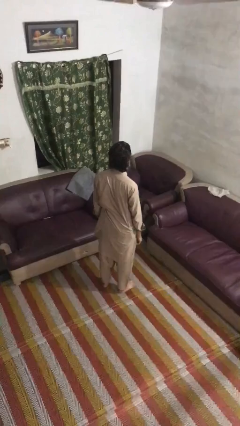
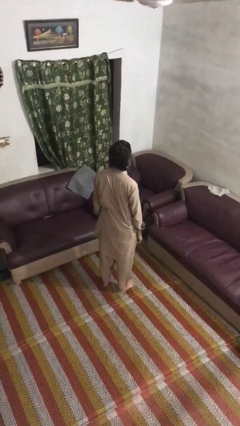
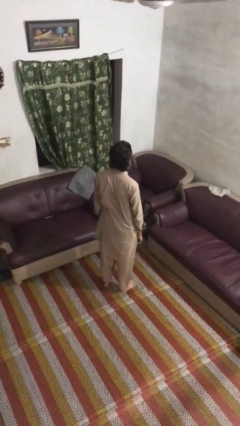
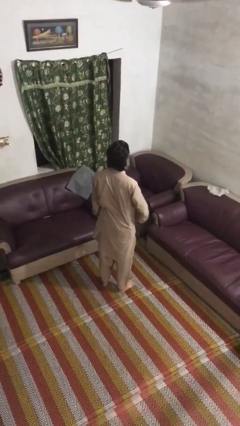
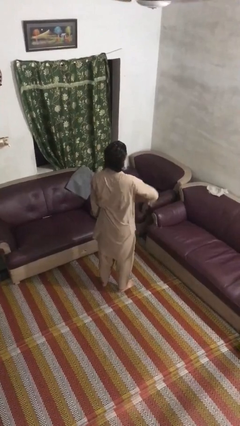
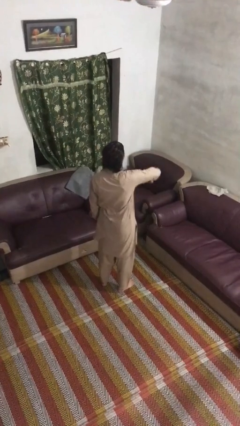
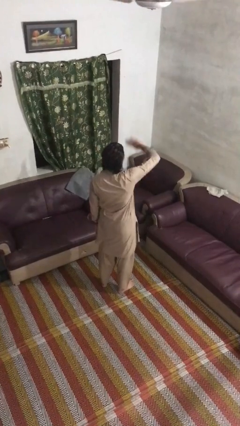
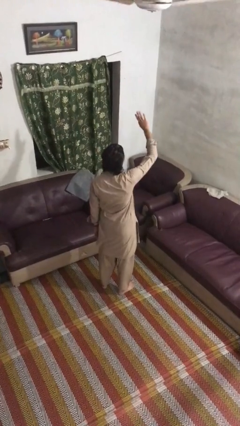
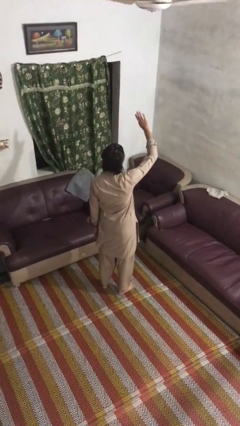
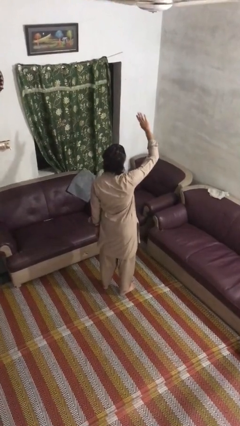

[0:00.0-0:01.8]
person gestures swipe up

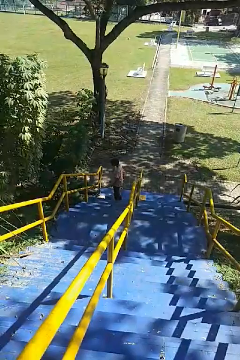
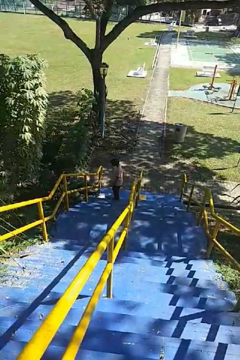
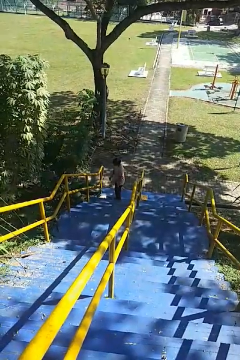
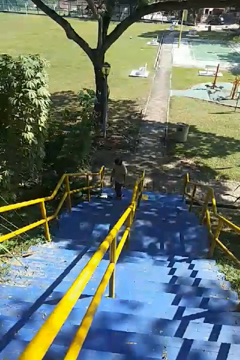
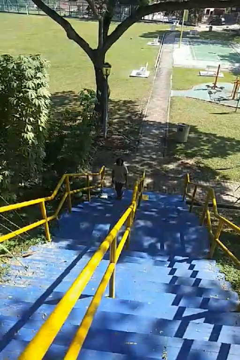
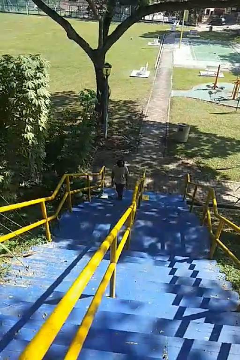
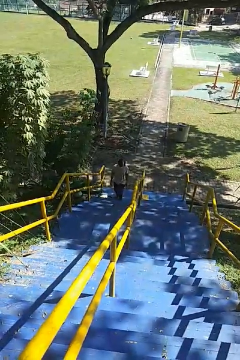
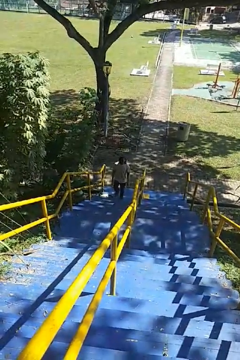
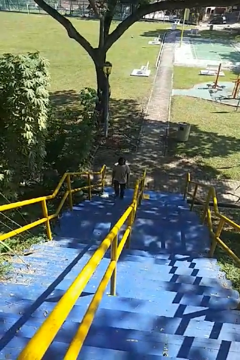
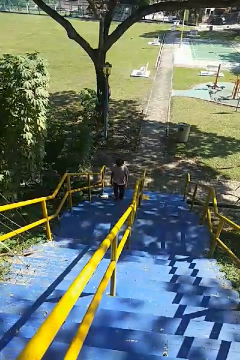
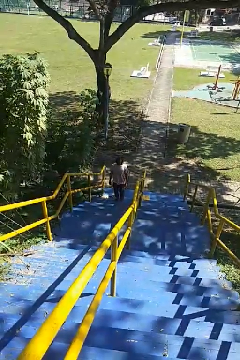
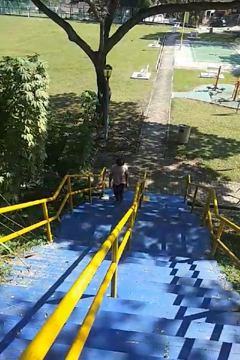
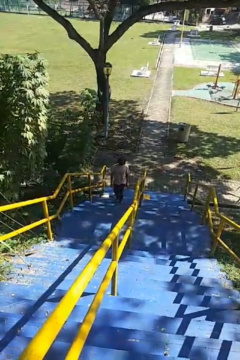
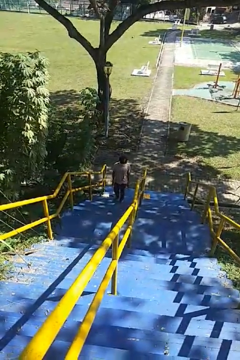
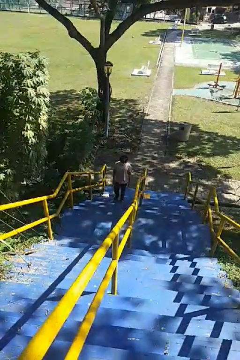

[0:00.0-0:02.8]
person climbs up stairs

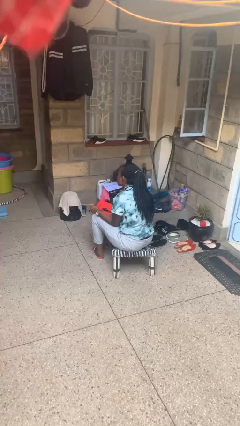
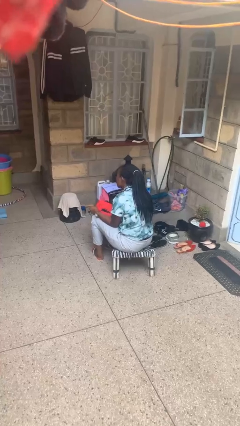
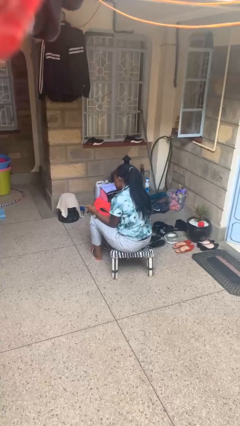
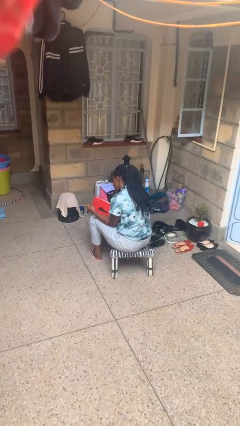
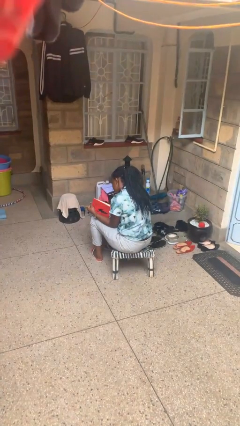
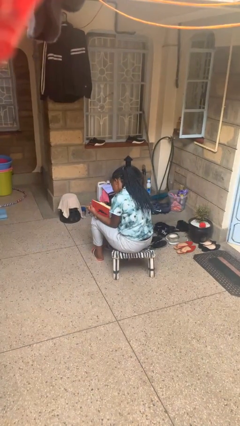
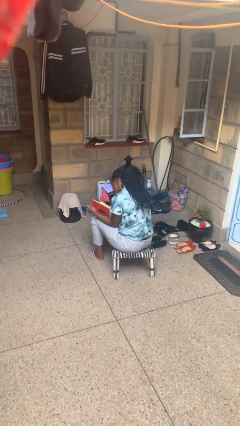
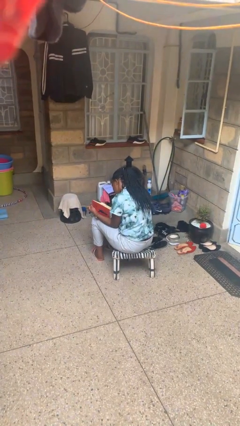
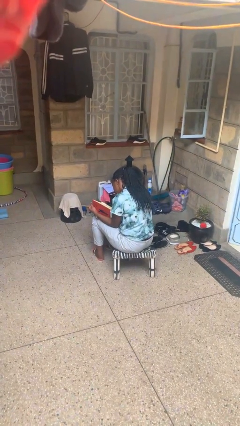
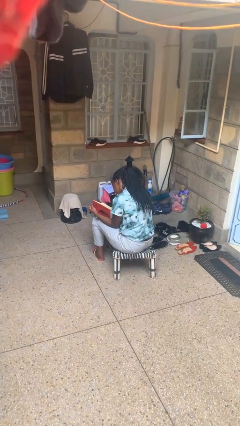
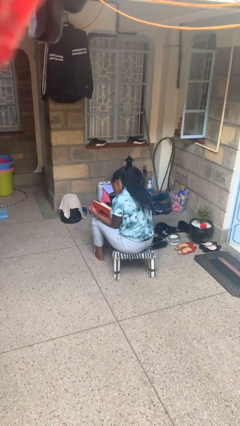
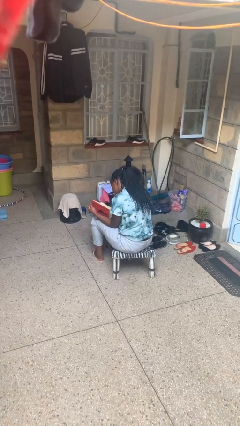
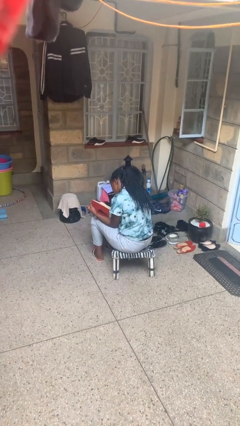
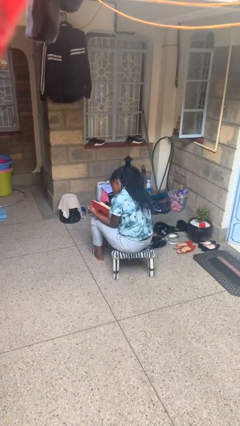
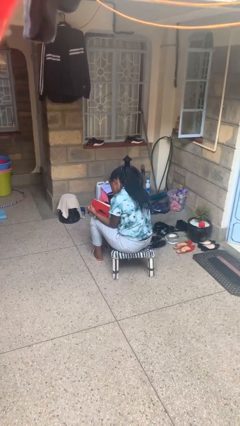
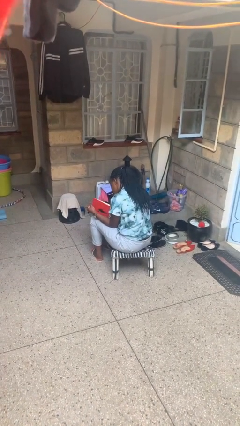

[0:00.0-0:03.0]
person reads book

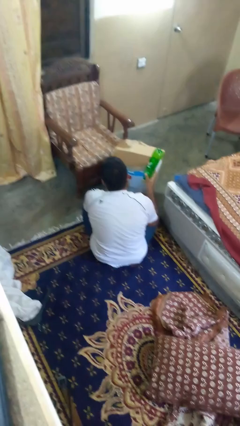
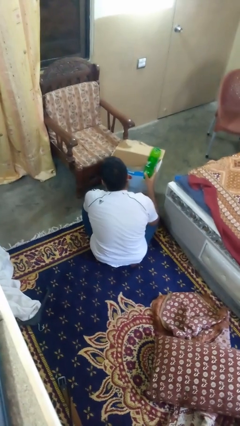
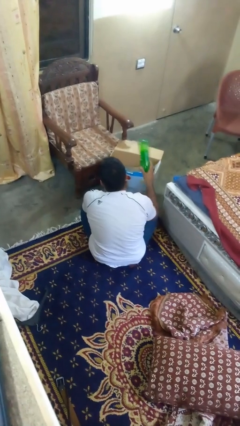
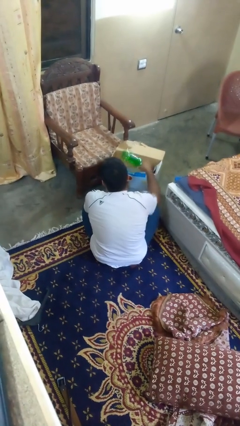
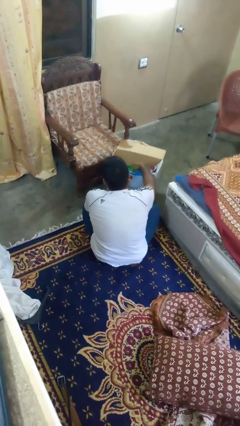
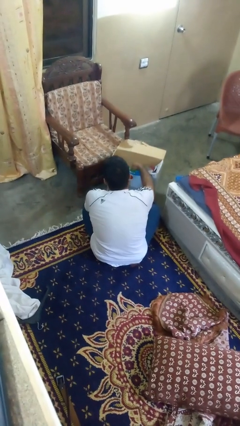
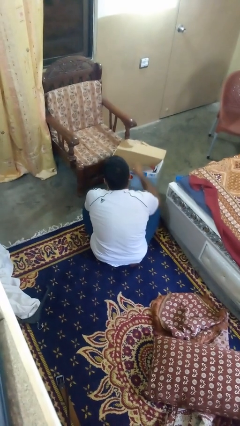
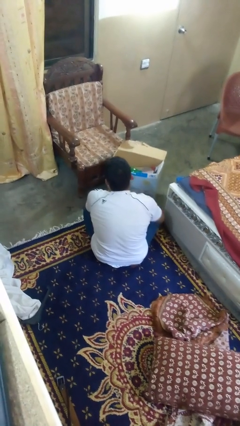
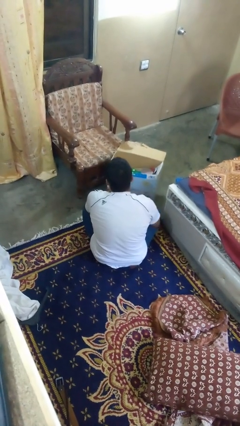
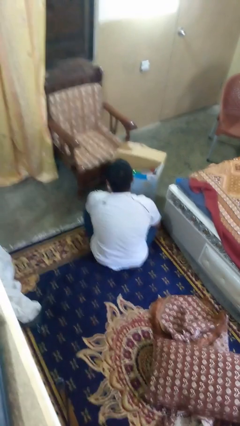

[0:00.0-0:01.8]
person puts object into box

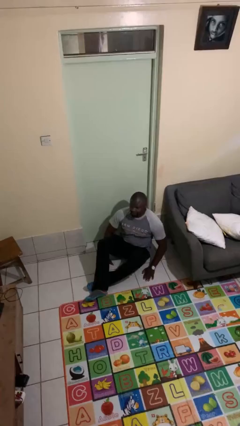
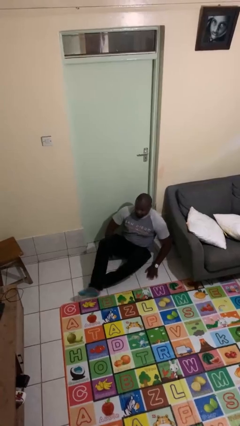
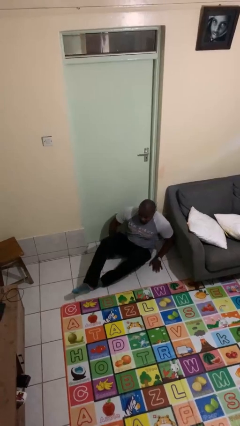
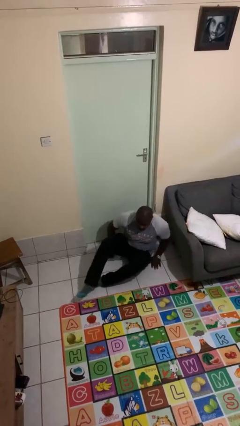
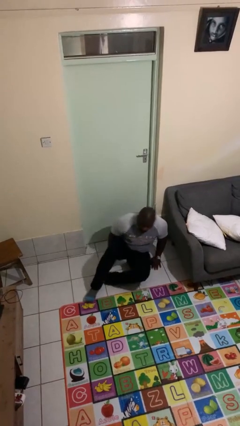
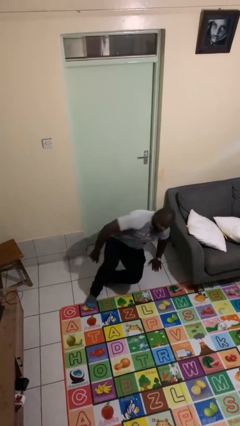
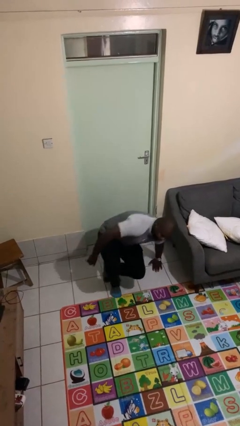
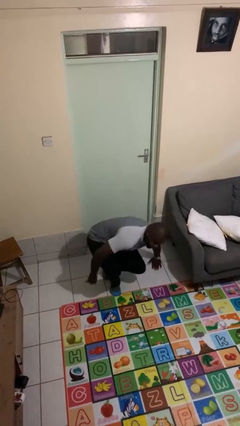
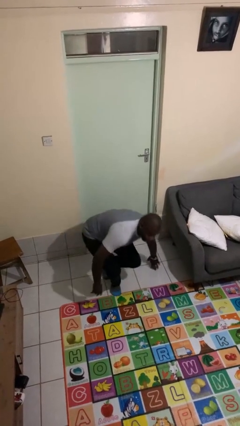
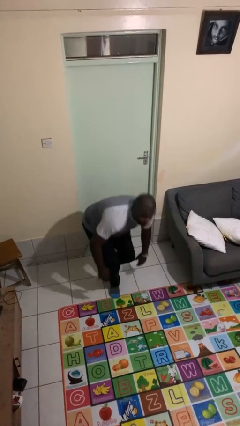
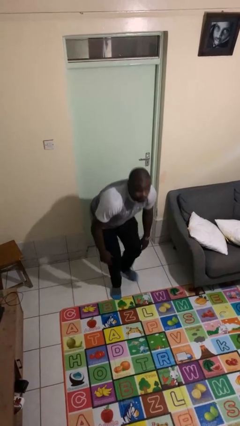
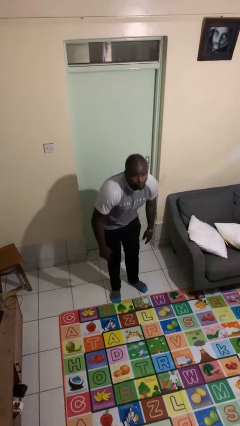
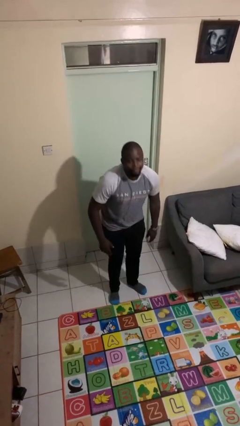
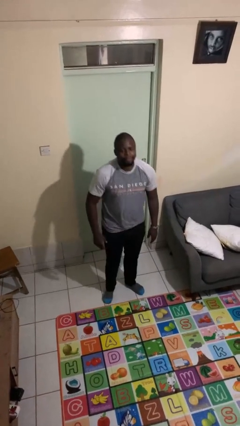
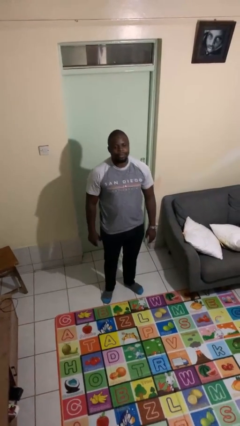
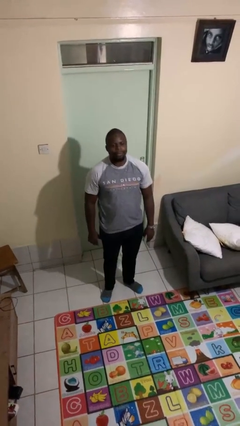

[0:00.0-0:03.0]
person stands up from floor

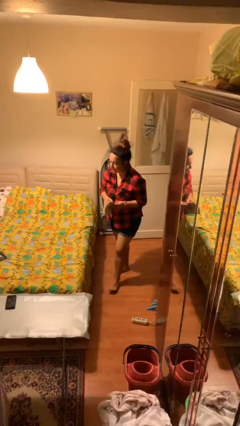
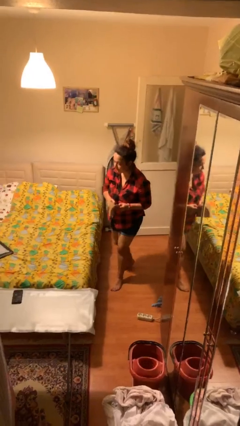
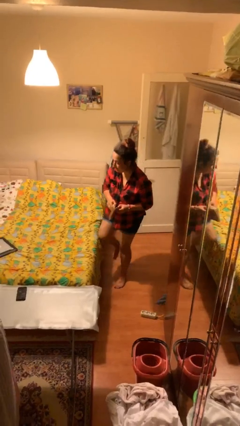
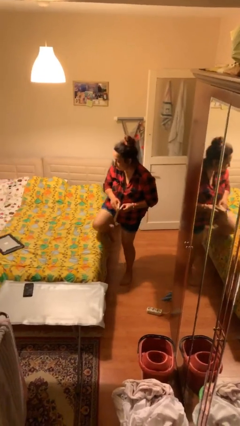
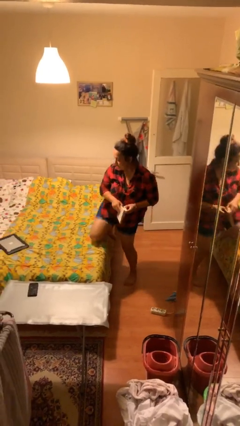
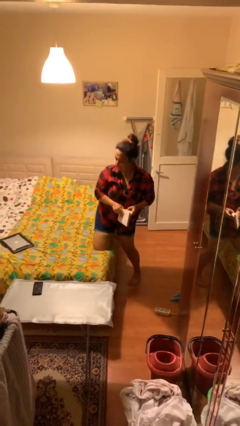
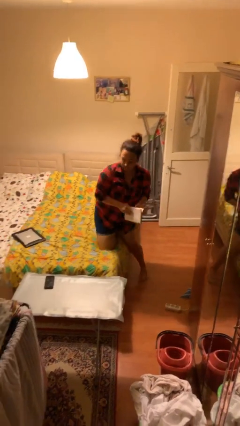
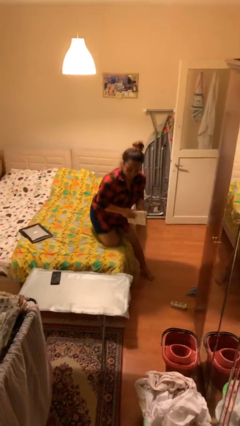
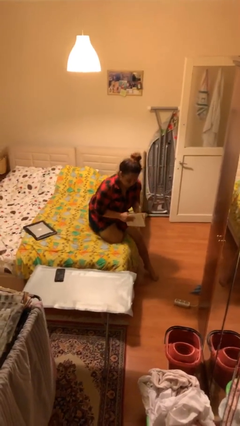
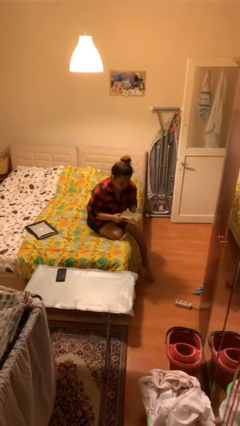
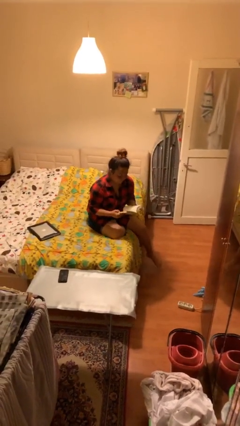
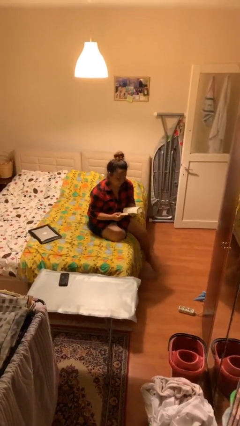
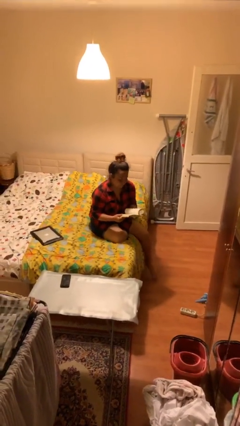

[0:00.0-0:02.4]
person sits down

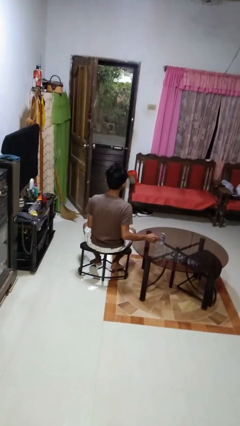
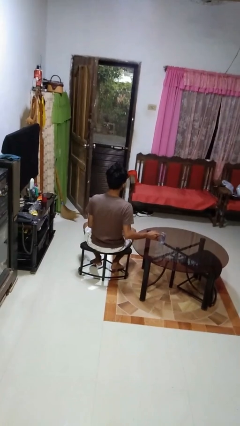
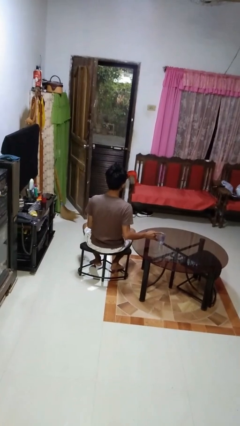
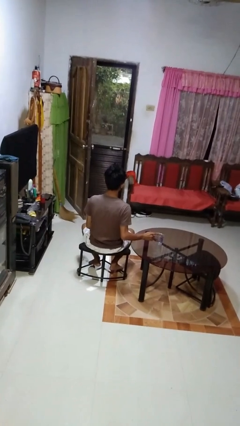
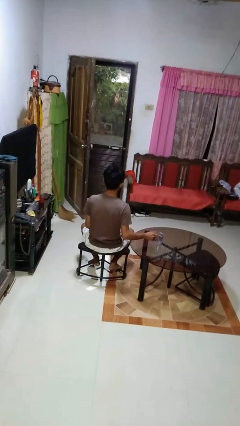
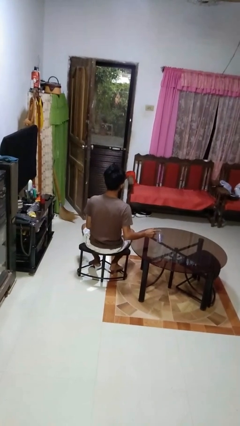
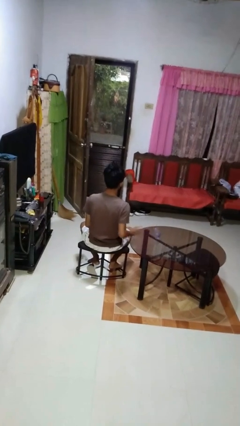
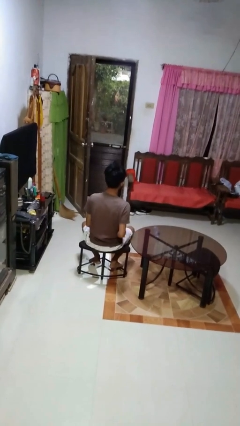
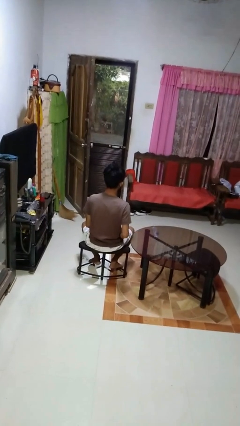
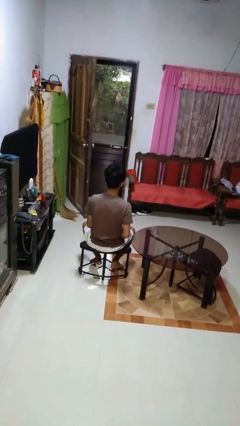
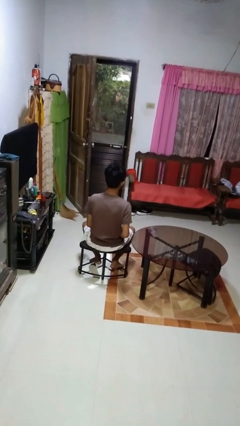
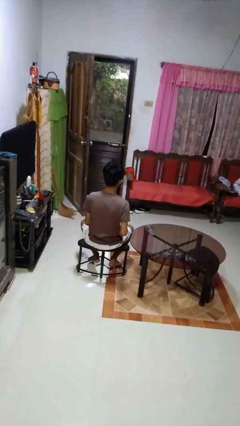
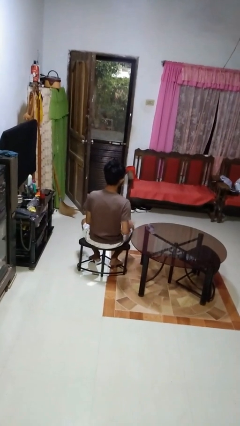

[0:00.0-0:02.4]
person knocks over glass

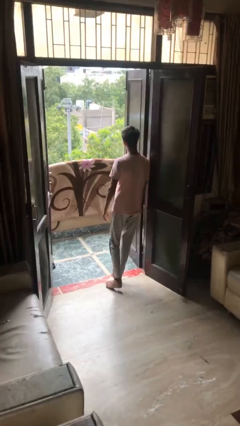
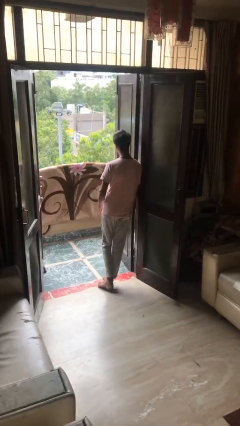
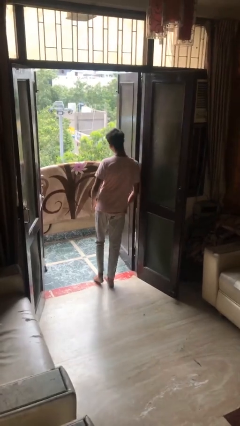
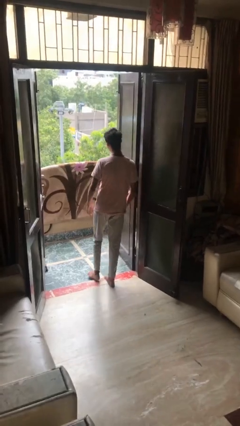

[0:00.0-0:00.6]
person bumps into wall
